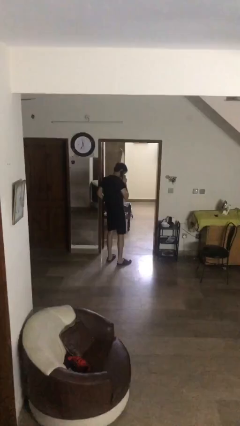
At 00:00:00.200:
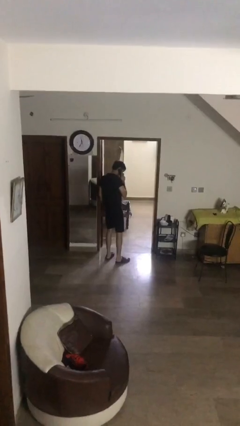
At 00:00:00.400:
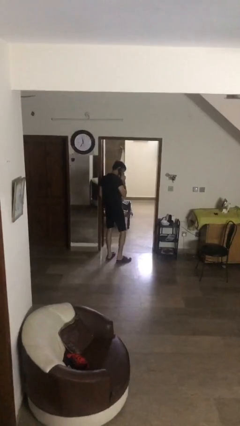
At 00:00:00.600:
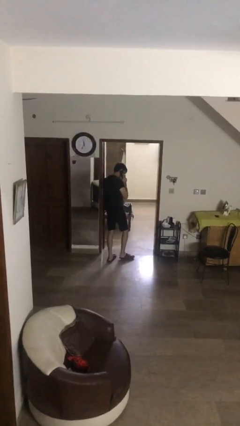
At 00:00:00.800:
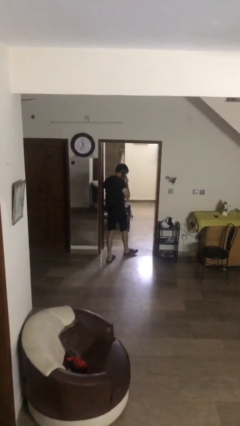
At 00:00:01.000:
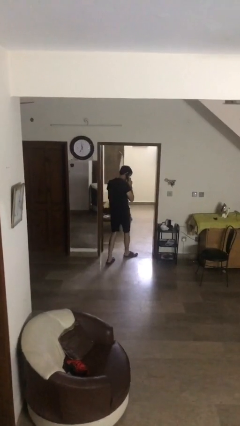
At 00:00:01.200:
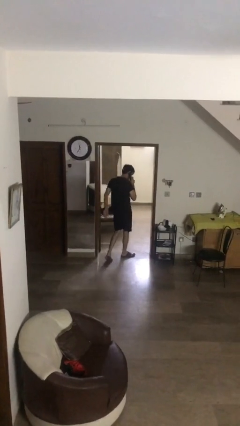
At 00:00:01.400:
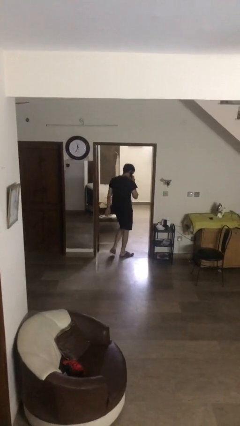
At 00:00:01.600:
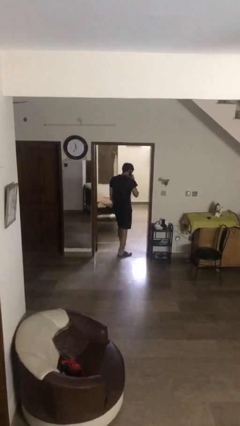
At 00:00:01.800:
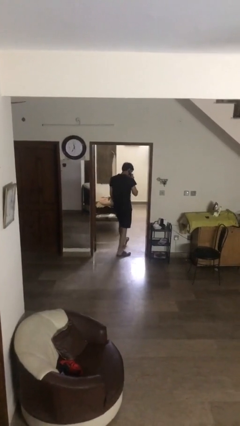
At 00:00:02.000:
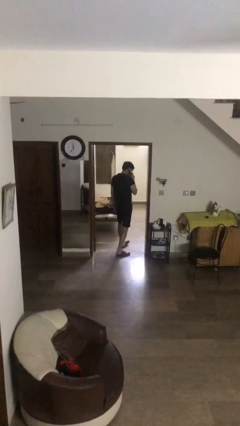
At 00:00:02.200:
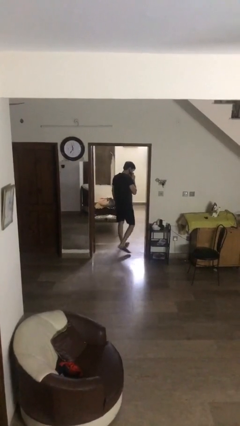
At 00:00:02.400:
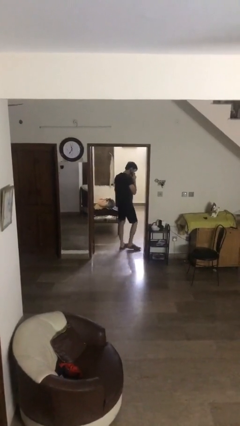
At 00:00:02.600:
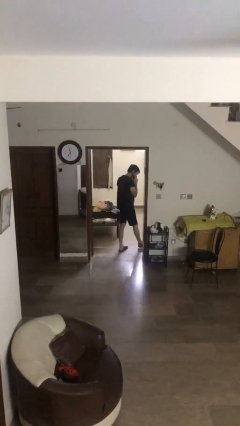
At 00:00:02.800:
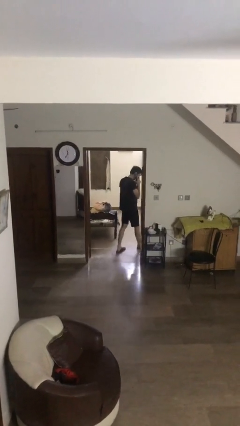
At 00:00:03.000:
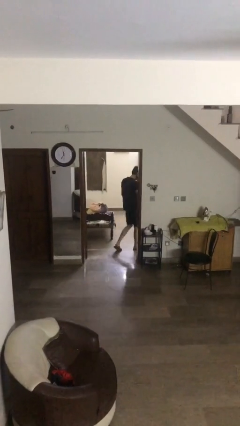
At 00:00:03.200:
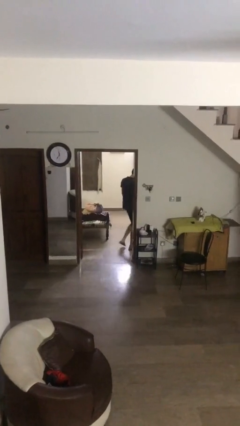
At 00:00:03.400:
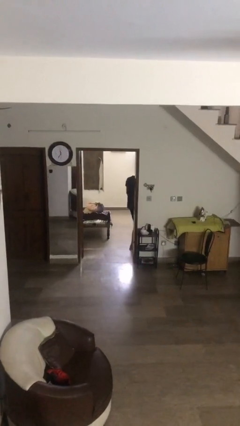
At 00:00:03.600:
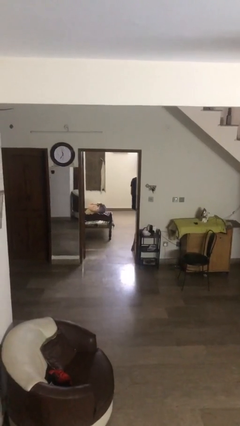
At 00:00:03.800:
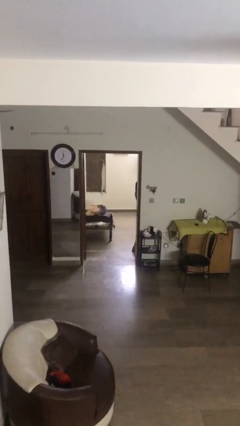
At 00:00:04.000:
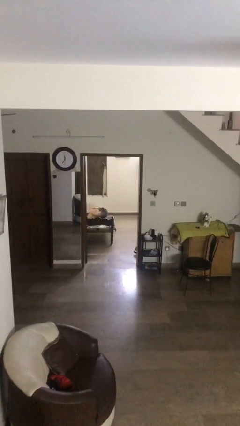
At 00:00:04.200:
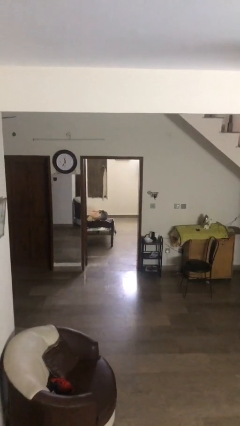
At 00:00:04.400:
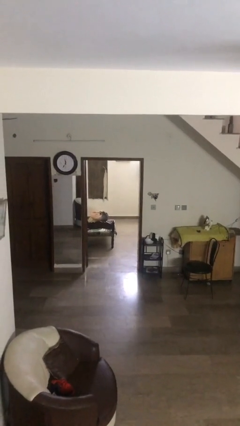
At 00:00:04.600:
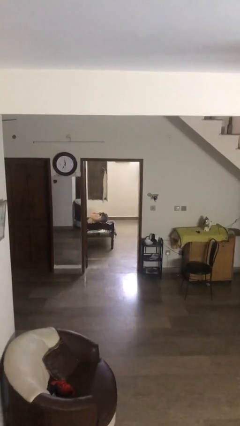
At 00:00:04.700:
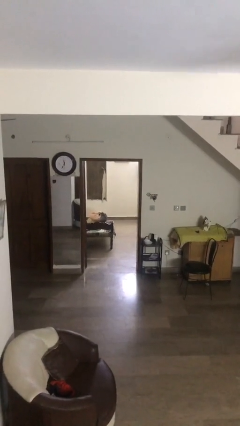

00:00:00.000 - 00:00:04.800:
person exits scene through structure

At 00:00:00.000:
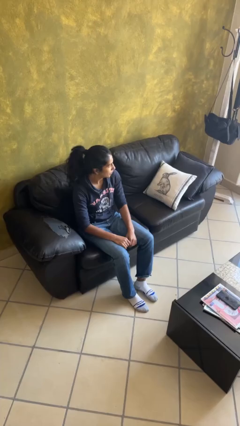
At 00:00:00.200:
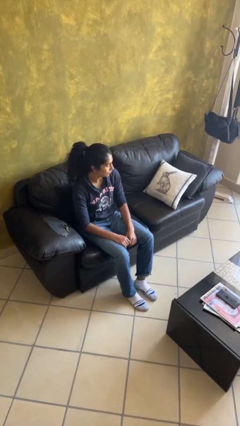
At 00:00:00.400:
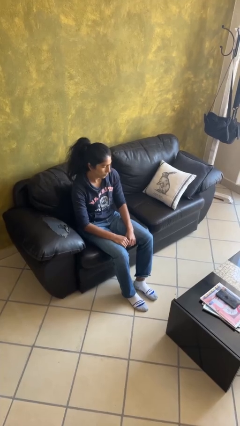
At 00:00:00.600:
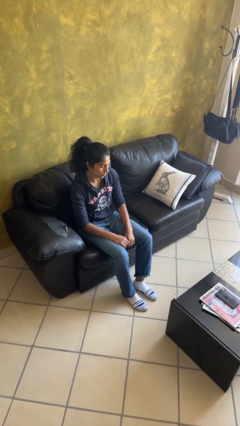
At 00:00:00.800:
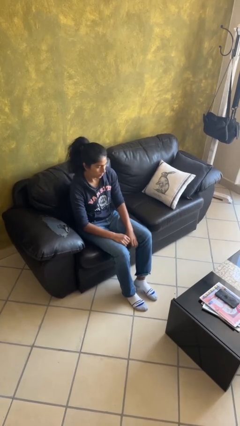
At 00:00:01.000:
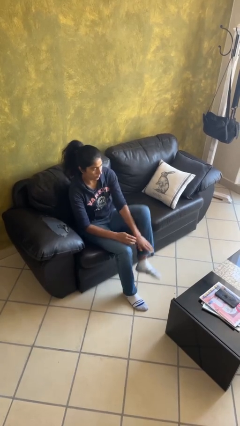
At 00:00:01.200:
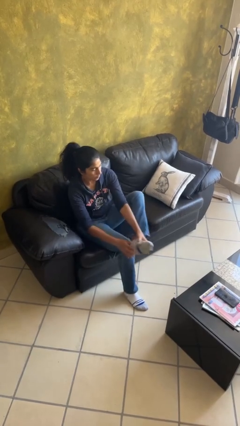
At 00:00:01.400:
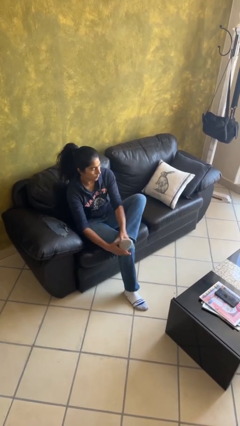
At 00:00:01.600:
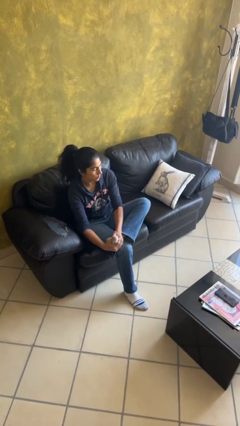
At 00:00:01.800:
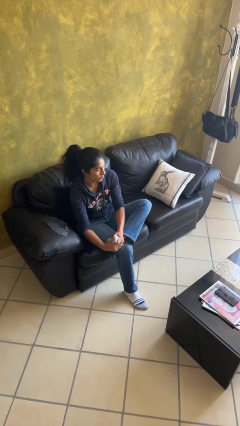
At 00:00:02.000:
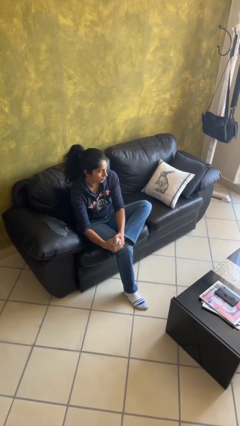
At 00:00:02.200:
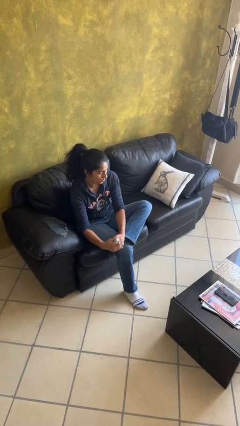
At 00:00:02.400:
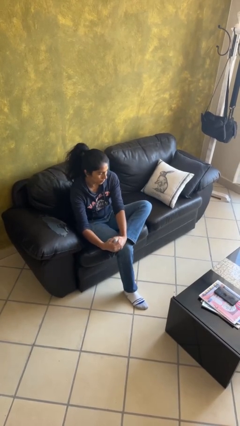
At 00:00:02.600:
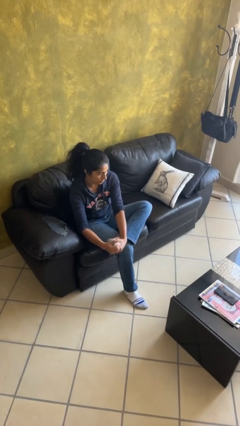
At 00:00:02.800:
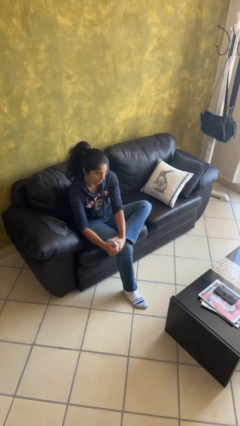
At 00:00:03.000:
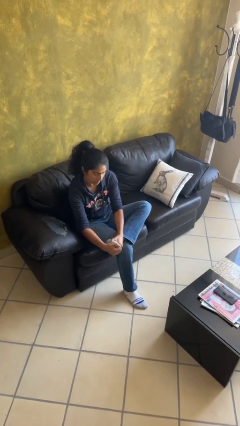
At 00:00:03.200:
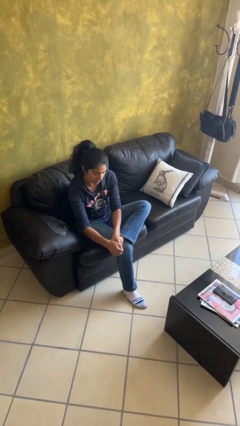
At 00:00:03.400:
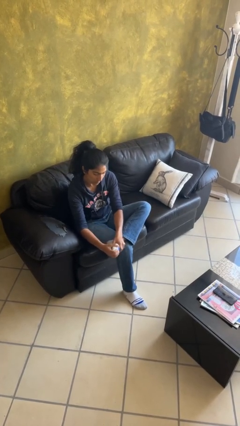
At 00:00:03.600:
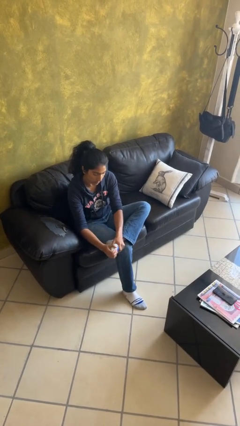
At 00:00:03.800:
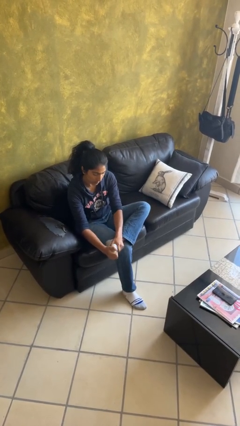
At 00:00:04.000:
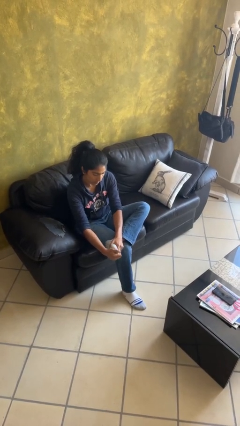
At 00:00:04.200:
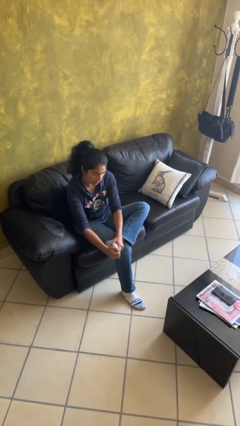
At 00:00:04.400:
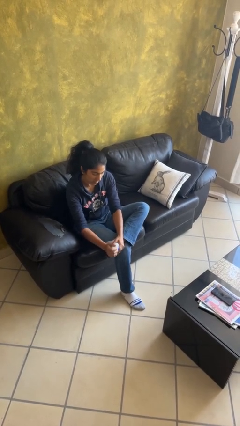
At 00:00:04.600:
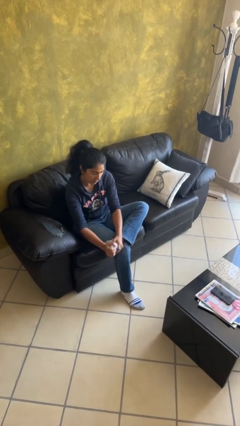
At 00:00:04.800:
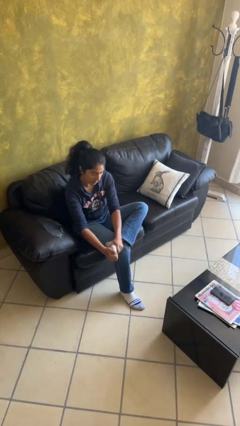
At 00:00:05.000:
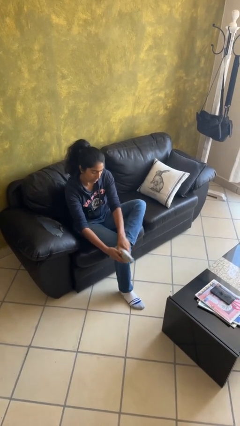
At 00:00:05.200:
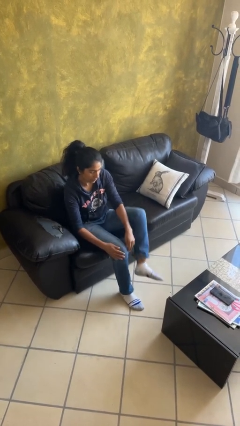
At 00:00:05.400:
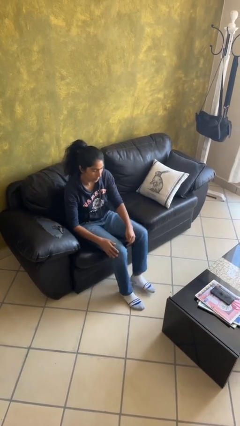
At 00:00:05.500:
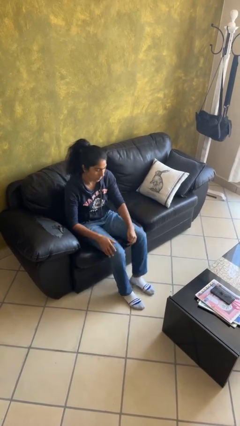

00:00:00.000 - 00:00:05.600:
person rubs foot

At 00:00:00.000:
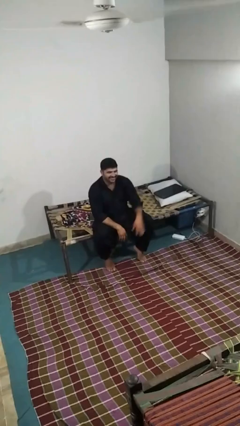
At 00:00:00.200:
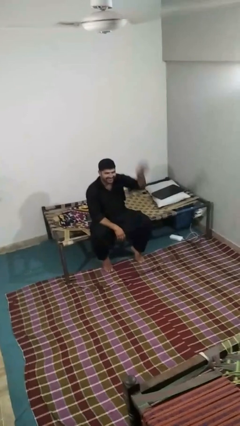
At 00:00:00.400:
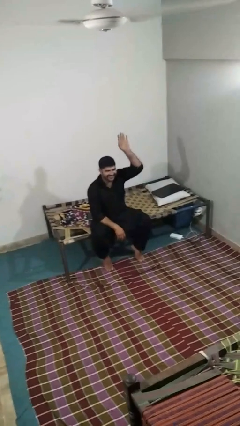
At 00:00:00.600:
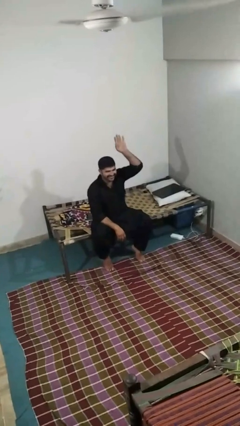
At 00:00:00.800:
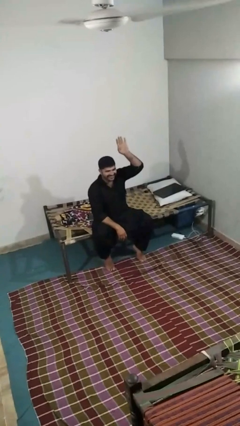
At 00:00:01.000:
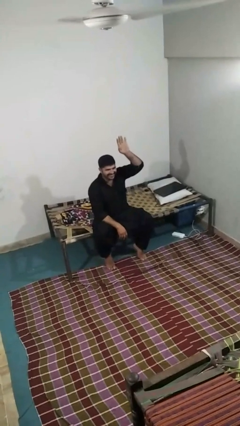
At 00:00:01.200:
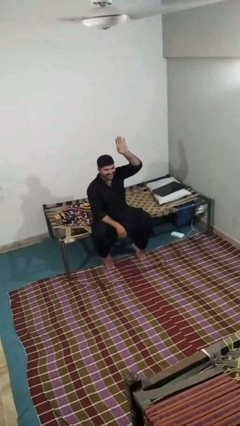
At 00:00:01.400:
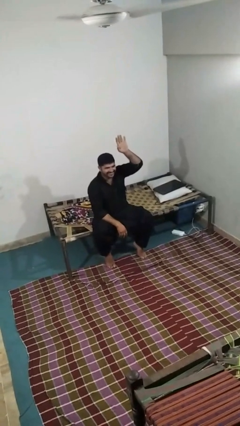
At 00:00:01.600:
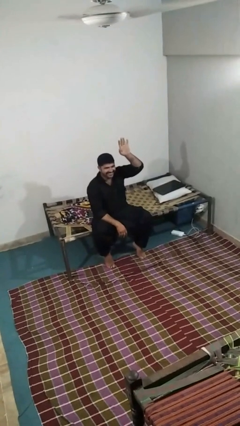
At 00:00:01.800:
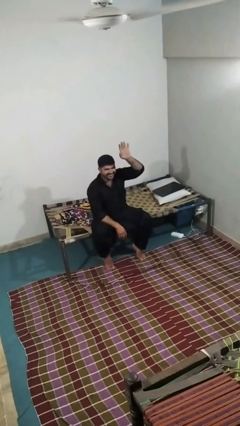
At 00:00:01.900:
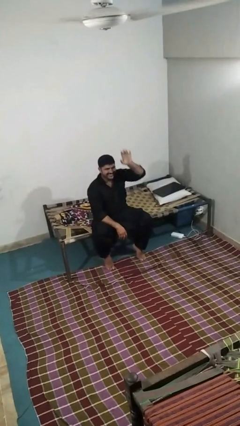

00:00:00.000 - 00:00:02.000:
person gestures raise hand

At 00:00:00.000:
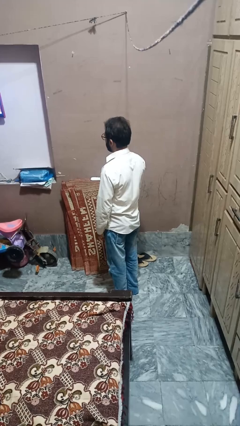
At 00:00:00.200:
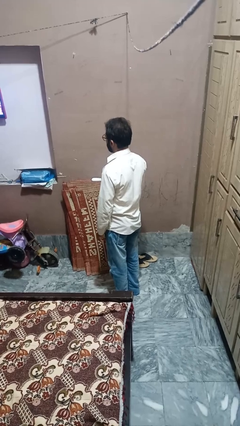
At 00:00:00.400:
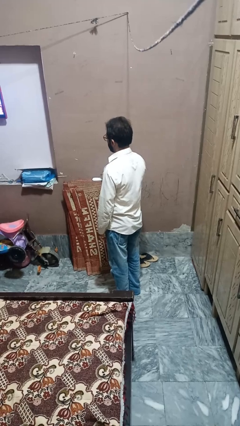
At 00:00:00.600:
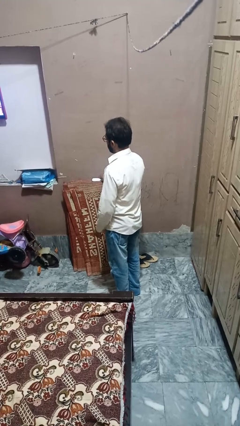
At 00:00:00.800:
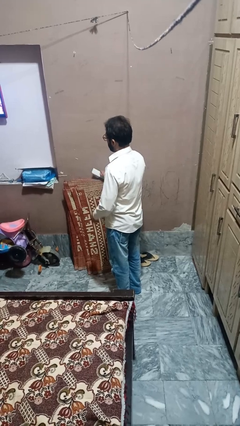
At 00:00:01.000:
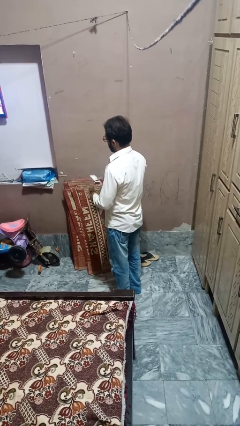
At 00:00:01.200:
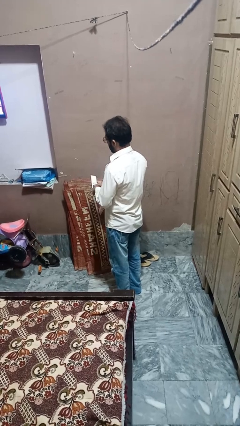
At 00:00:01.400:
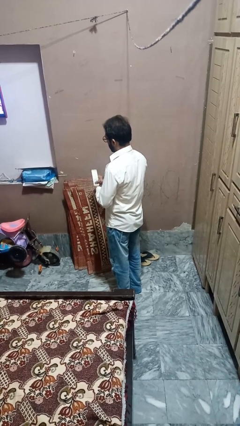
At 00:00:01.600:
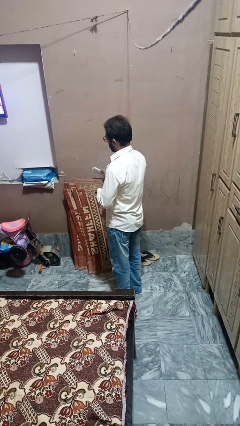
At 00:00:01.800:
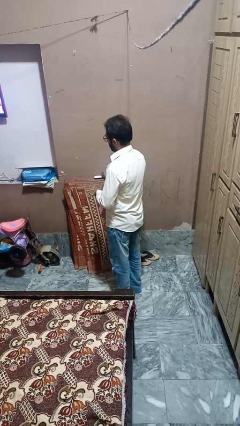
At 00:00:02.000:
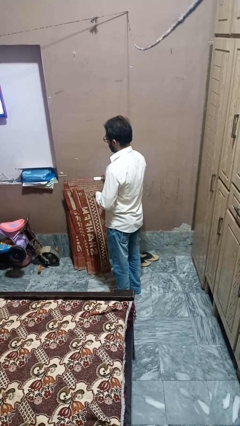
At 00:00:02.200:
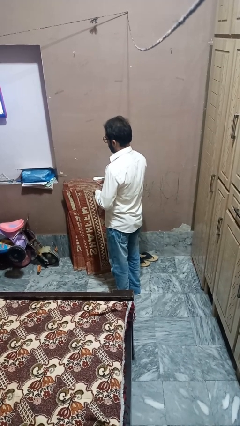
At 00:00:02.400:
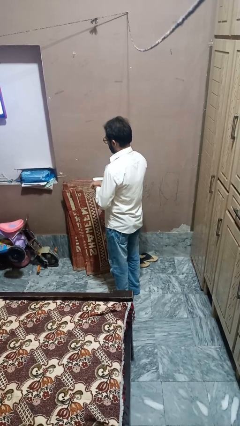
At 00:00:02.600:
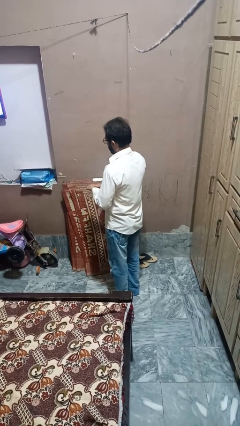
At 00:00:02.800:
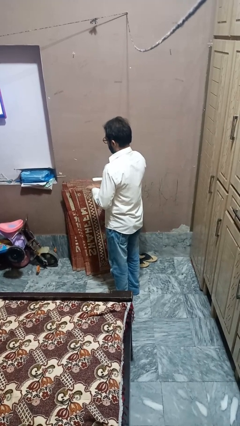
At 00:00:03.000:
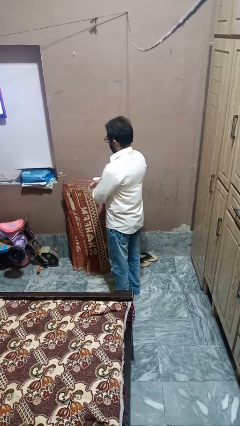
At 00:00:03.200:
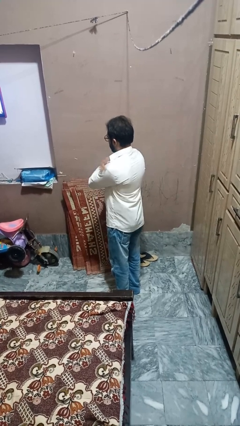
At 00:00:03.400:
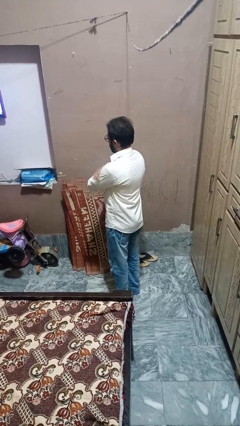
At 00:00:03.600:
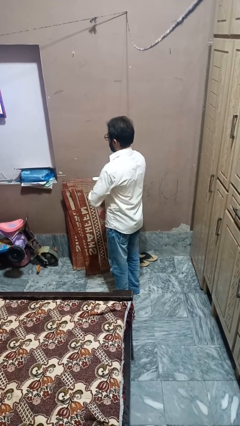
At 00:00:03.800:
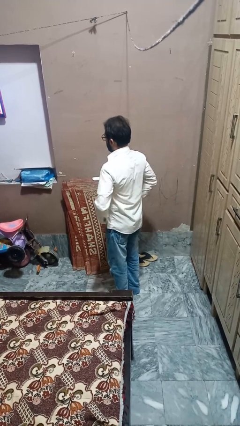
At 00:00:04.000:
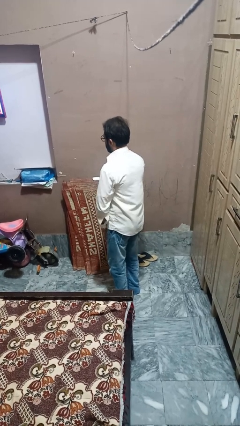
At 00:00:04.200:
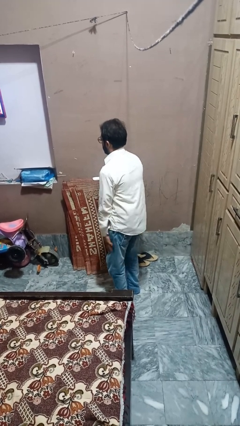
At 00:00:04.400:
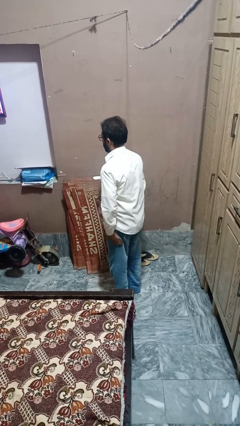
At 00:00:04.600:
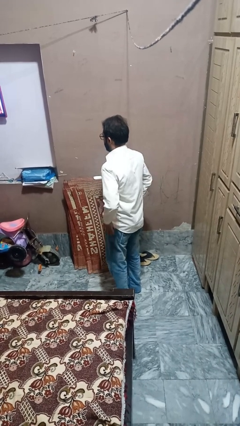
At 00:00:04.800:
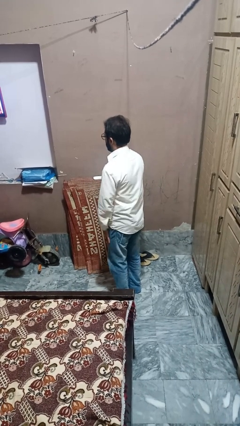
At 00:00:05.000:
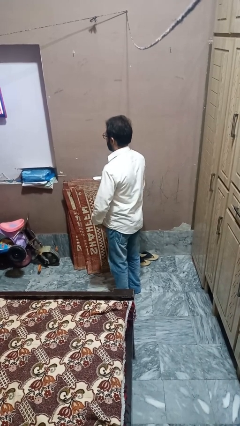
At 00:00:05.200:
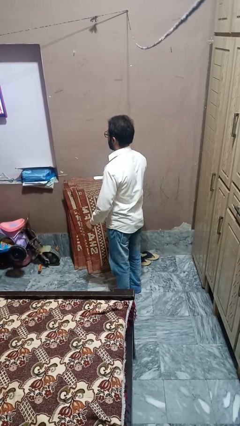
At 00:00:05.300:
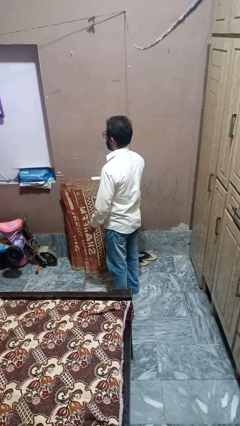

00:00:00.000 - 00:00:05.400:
person applies sunscreen
